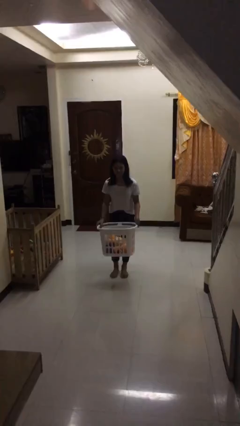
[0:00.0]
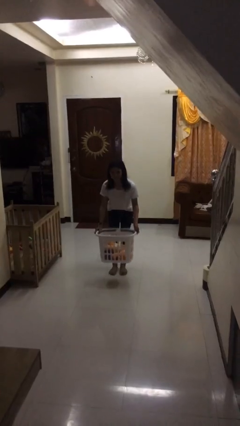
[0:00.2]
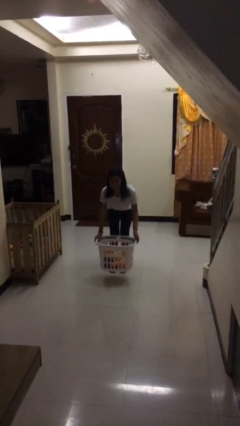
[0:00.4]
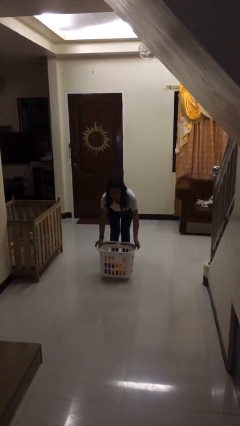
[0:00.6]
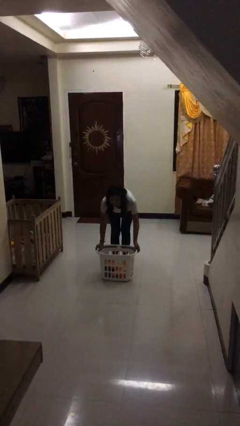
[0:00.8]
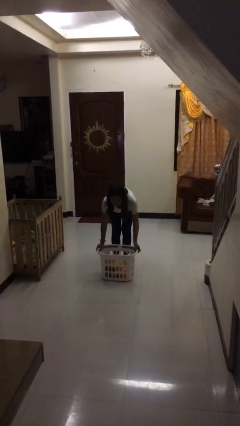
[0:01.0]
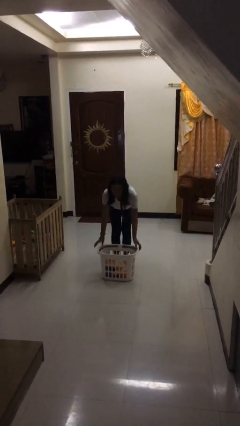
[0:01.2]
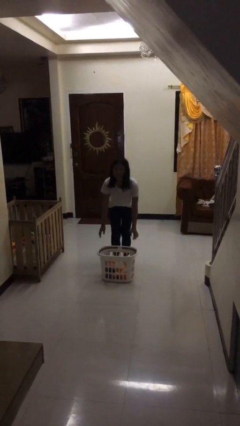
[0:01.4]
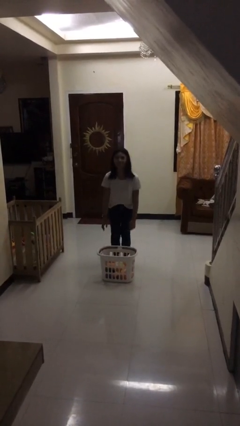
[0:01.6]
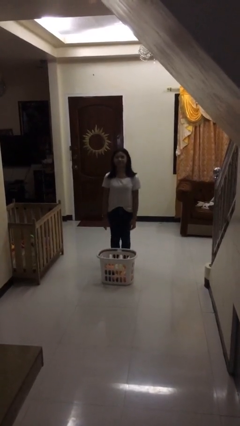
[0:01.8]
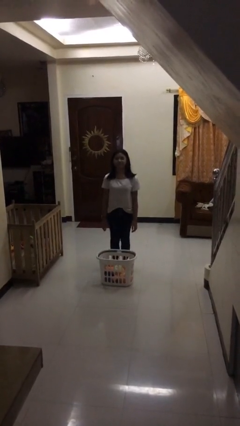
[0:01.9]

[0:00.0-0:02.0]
person puts down object on floor

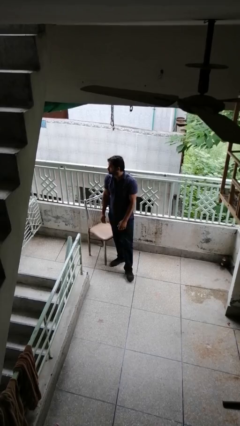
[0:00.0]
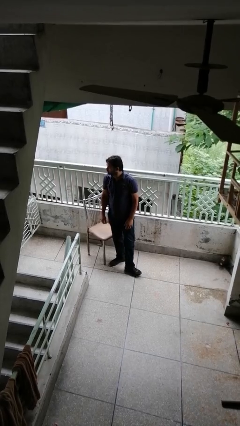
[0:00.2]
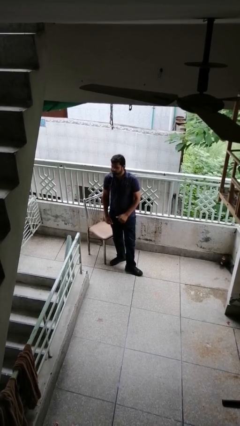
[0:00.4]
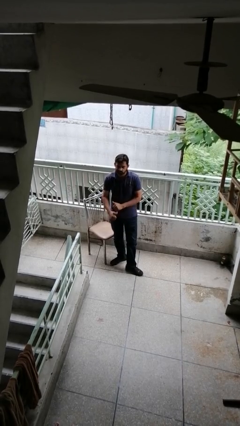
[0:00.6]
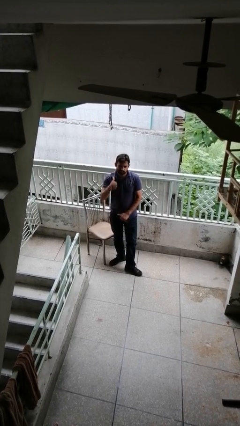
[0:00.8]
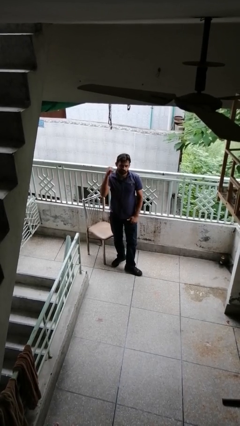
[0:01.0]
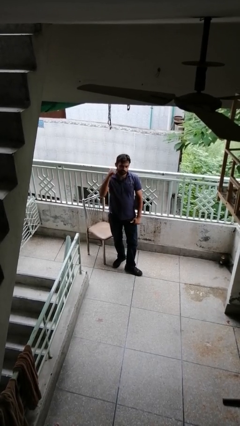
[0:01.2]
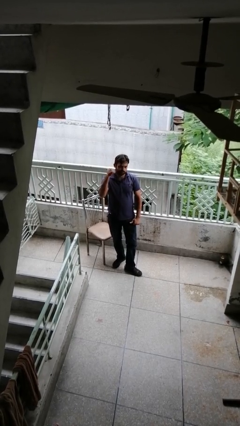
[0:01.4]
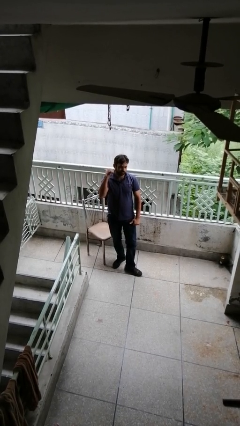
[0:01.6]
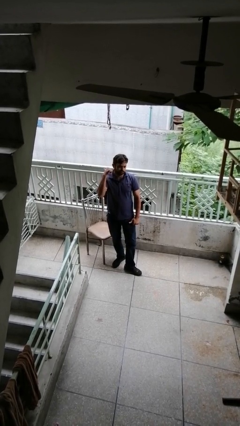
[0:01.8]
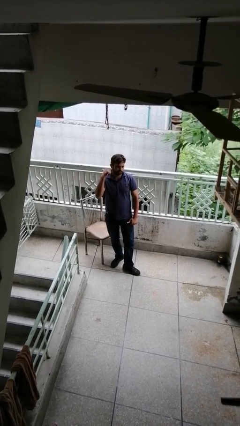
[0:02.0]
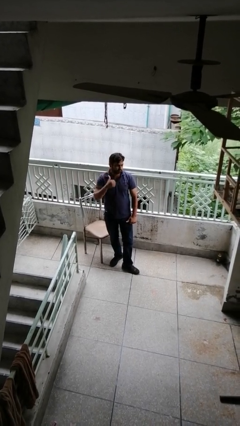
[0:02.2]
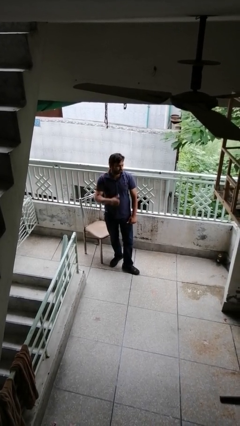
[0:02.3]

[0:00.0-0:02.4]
person gestures behind me

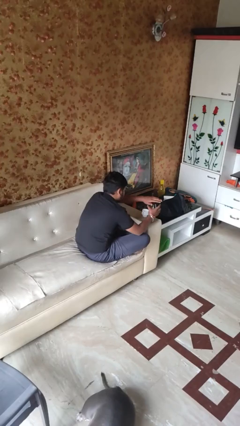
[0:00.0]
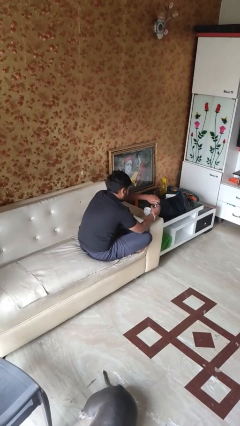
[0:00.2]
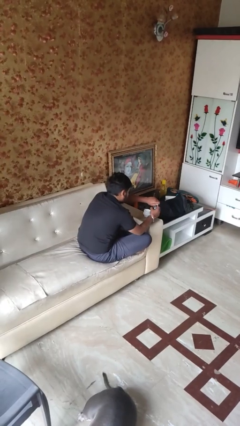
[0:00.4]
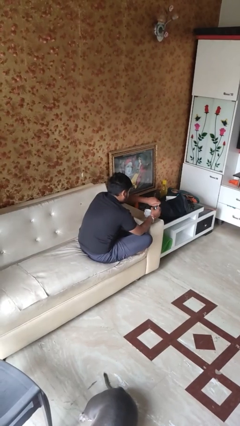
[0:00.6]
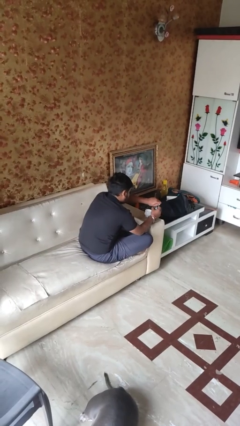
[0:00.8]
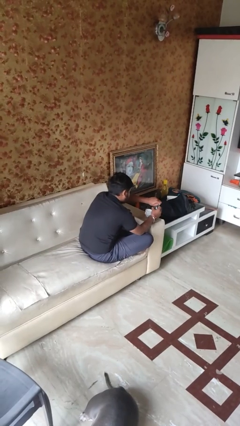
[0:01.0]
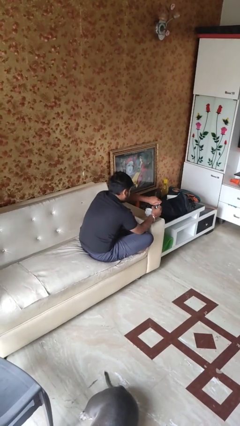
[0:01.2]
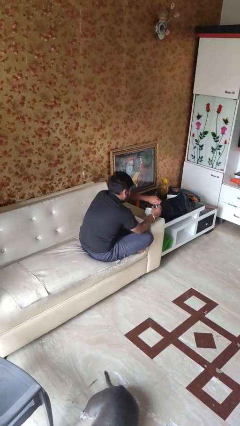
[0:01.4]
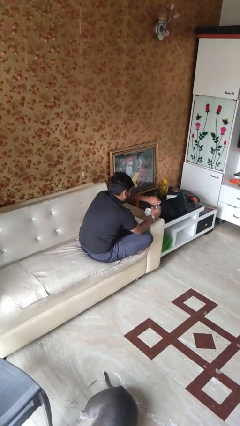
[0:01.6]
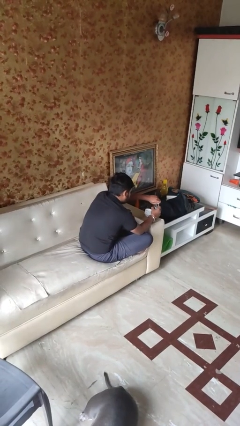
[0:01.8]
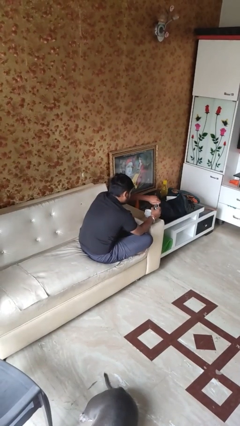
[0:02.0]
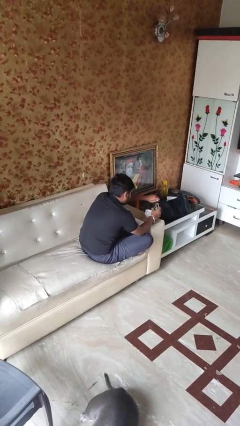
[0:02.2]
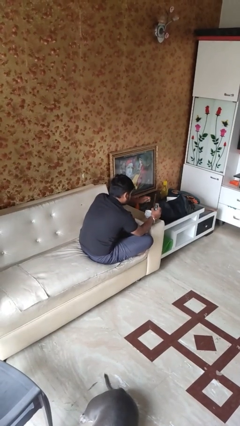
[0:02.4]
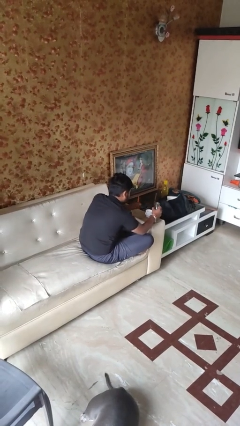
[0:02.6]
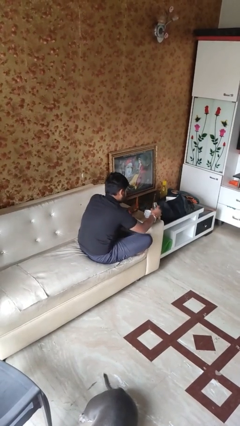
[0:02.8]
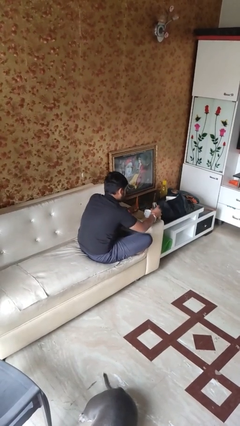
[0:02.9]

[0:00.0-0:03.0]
person unscrews lid from bottle

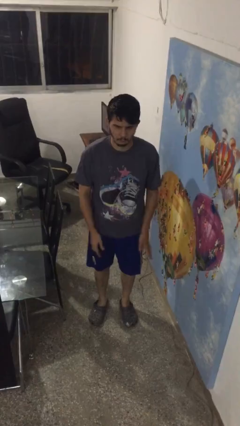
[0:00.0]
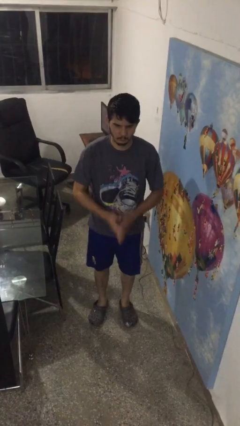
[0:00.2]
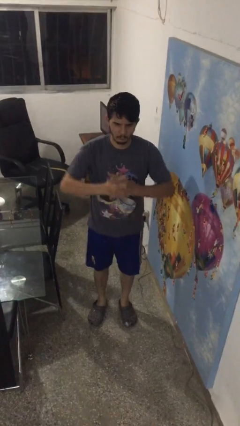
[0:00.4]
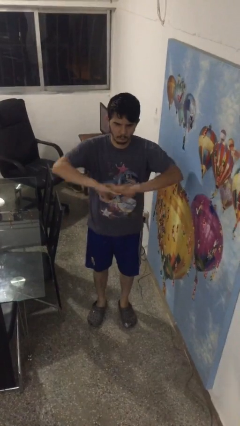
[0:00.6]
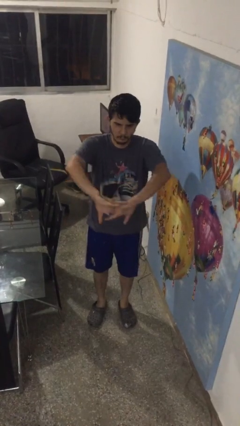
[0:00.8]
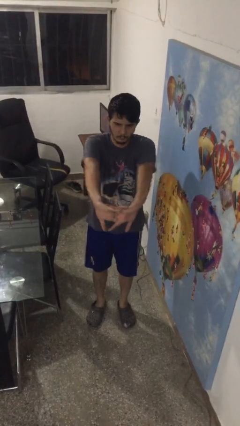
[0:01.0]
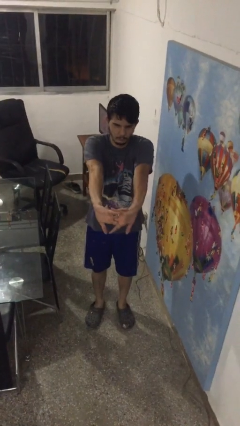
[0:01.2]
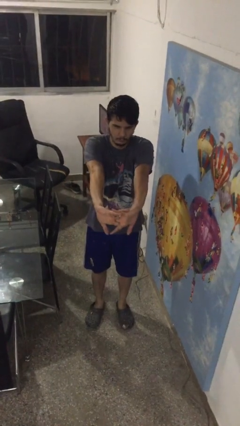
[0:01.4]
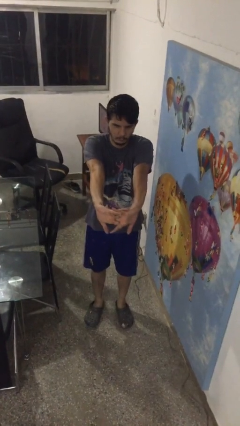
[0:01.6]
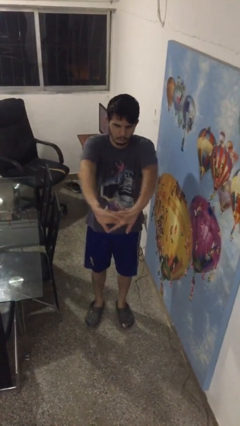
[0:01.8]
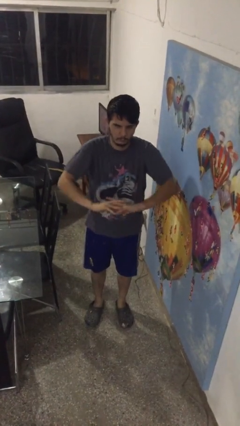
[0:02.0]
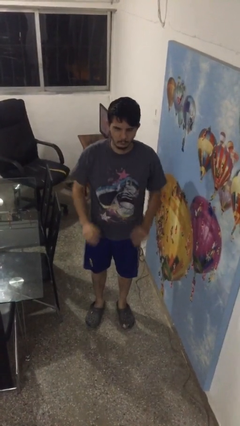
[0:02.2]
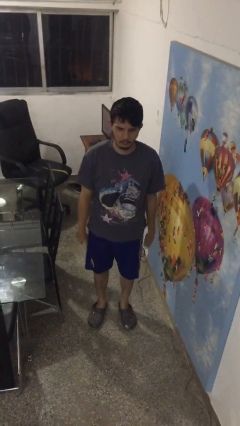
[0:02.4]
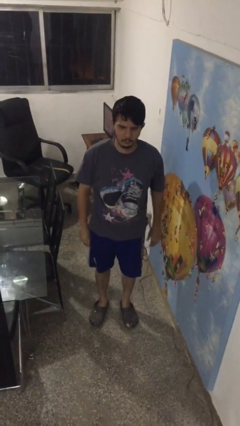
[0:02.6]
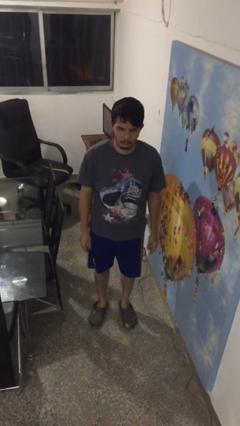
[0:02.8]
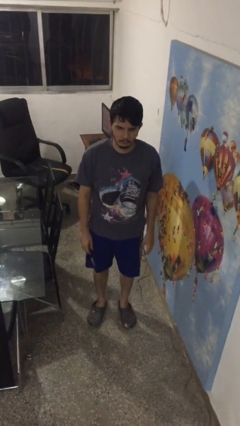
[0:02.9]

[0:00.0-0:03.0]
person cracks knuckles

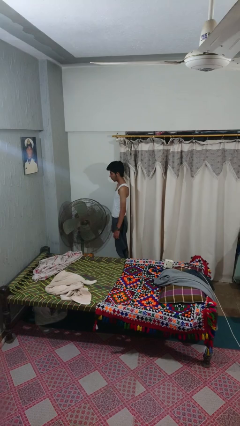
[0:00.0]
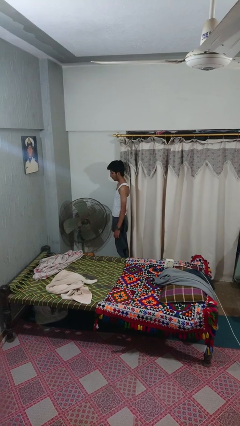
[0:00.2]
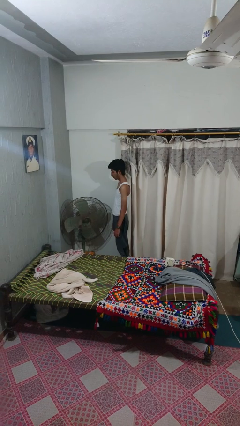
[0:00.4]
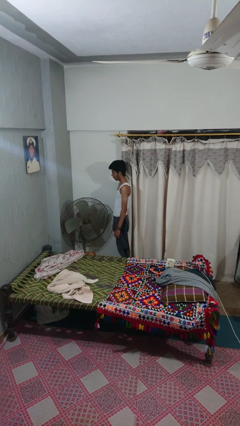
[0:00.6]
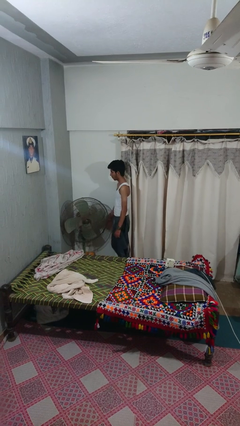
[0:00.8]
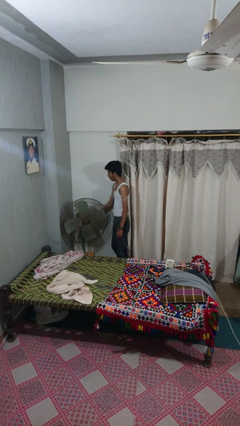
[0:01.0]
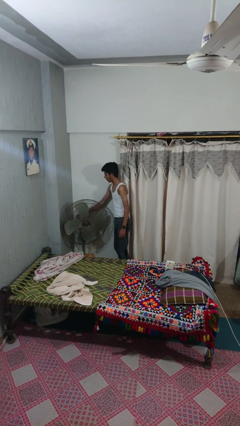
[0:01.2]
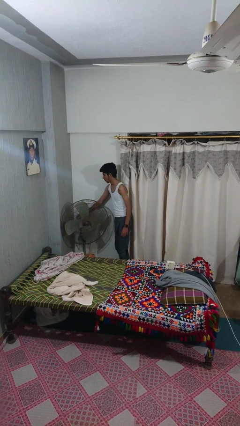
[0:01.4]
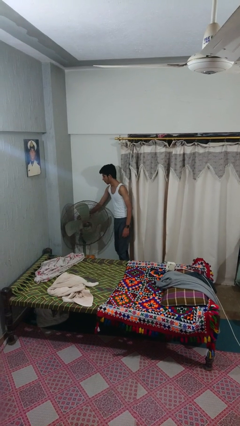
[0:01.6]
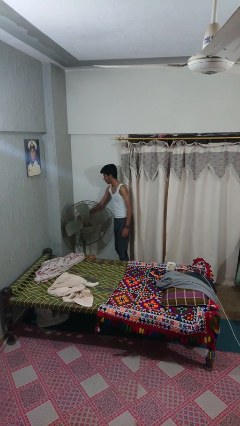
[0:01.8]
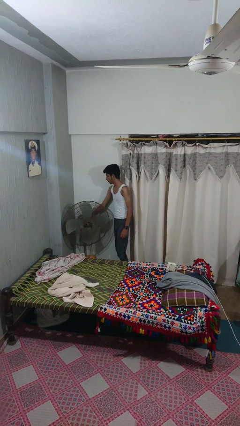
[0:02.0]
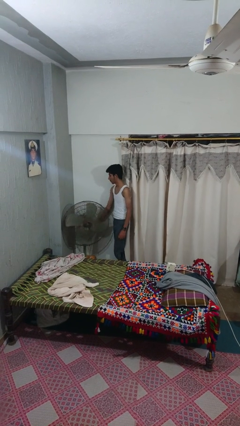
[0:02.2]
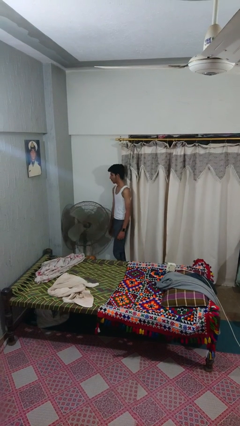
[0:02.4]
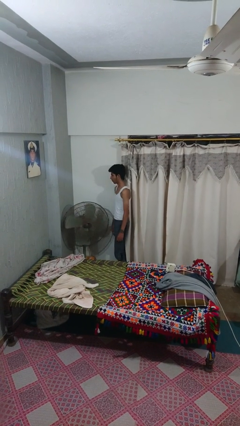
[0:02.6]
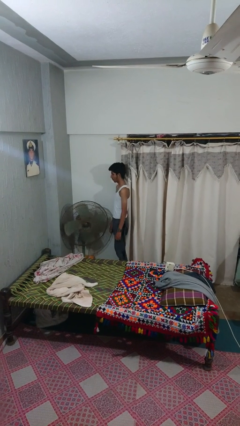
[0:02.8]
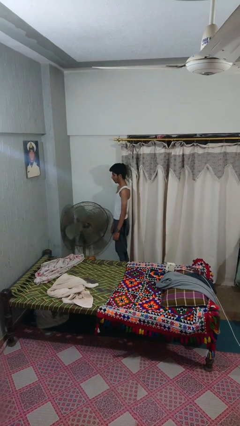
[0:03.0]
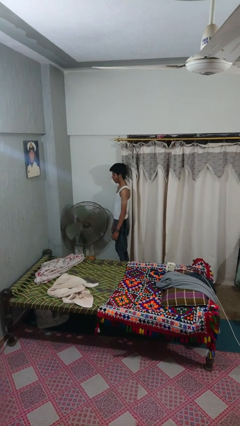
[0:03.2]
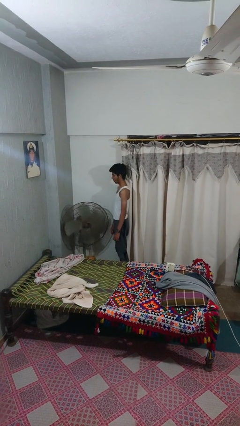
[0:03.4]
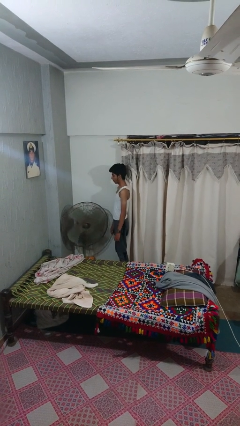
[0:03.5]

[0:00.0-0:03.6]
person turns on fan

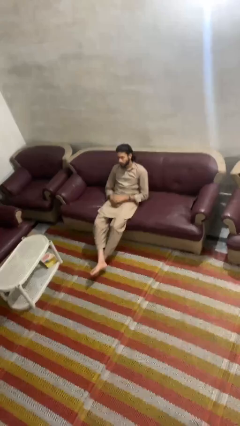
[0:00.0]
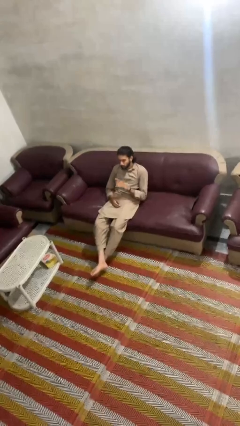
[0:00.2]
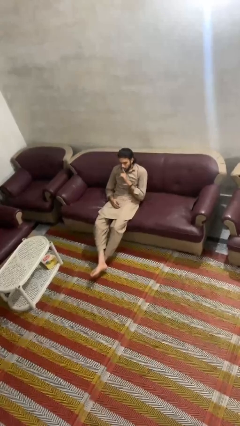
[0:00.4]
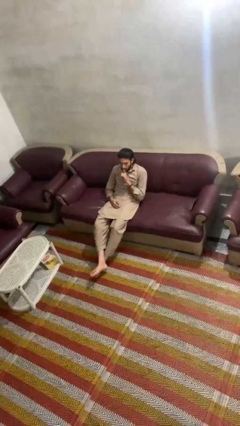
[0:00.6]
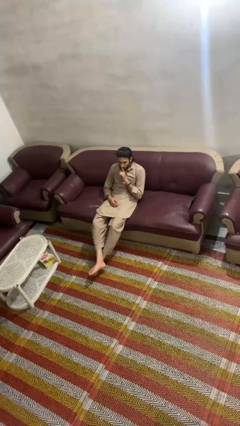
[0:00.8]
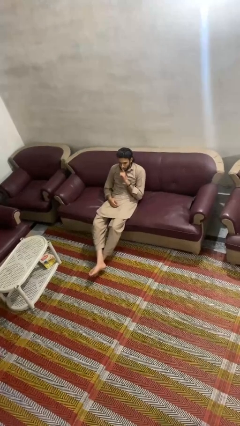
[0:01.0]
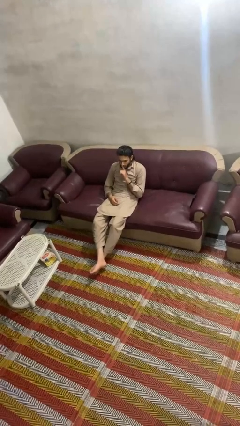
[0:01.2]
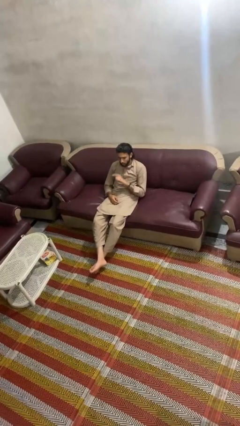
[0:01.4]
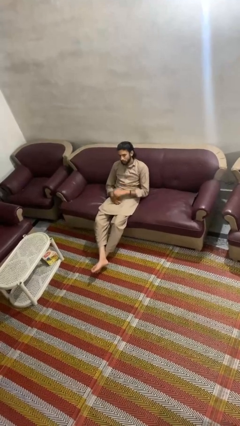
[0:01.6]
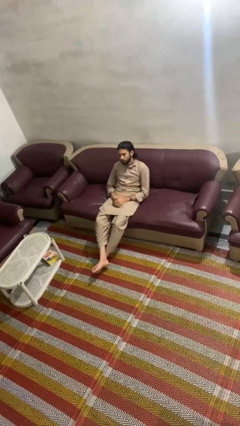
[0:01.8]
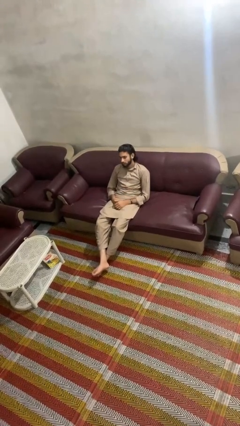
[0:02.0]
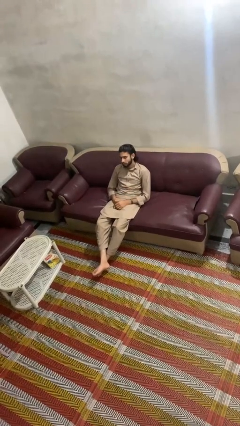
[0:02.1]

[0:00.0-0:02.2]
person gestures be quiet

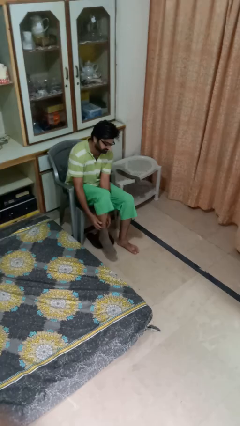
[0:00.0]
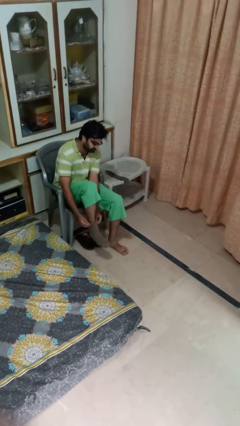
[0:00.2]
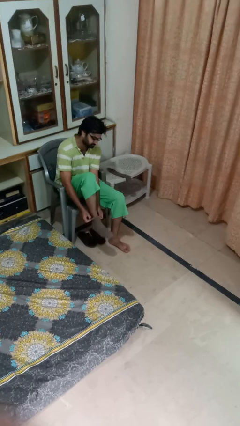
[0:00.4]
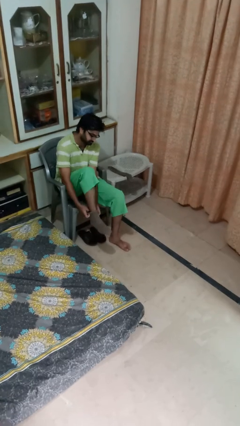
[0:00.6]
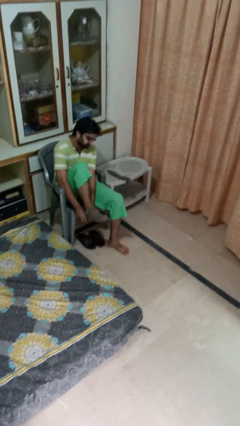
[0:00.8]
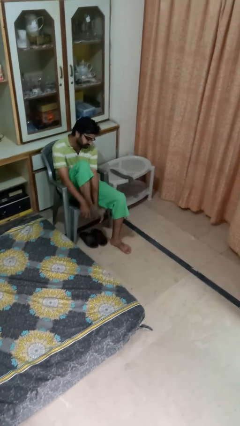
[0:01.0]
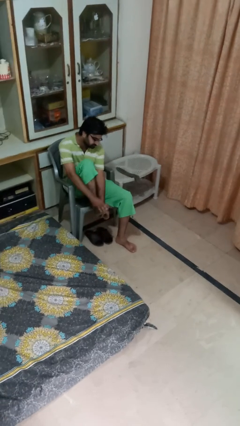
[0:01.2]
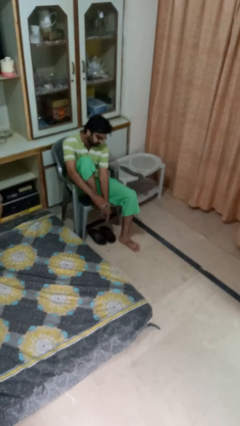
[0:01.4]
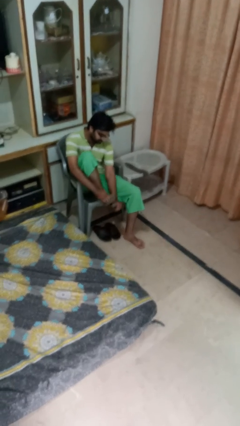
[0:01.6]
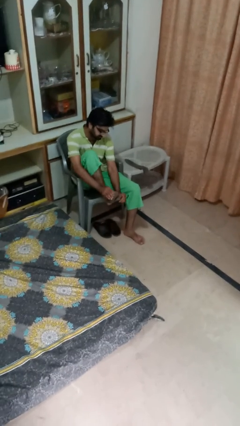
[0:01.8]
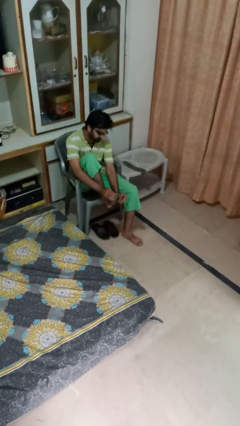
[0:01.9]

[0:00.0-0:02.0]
person takes off socks
